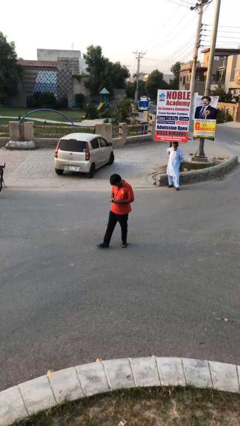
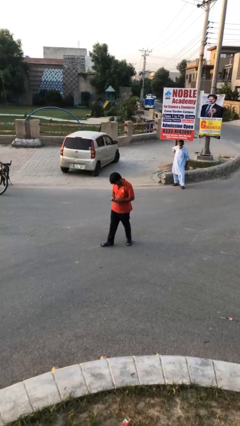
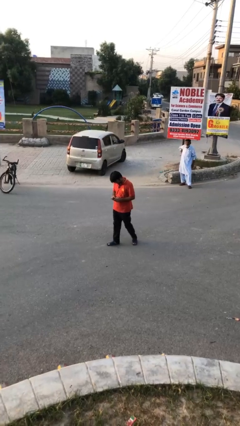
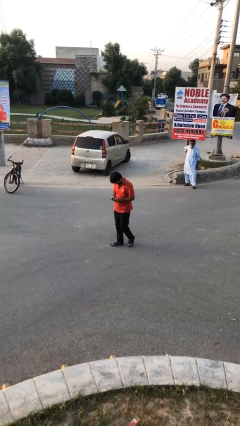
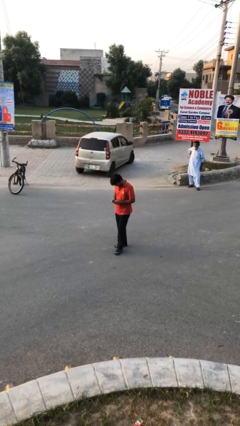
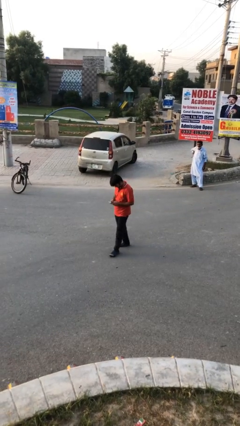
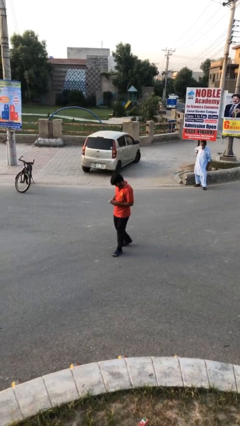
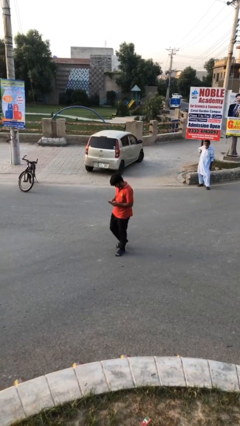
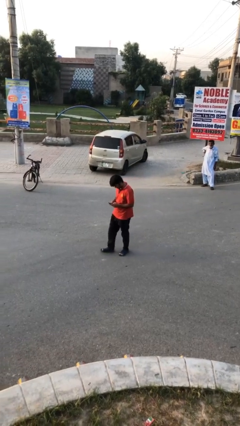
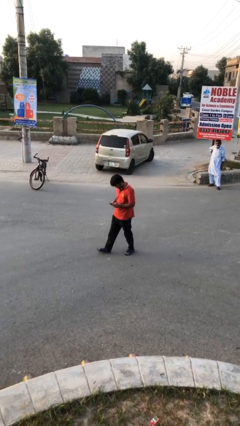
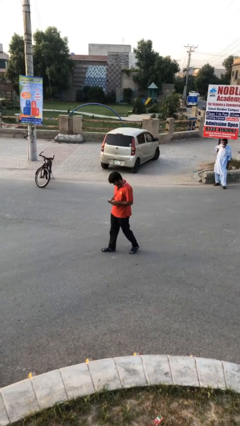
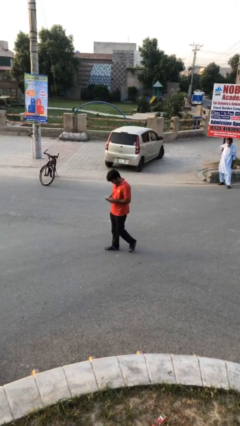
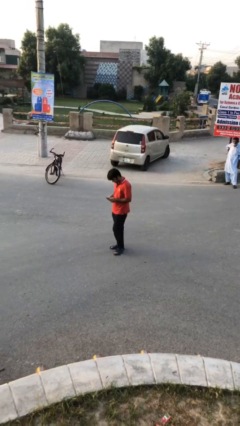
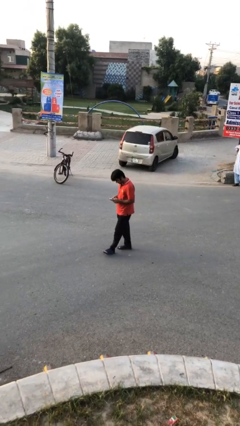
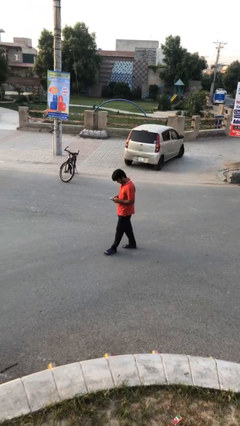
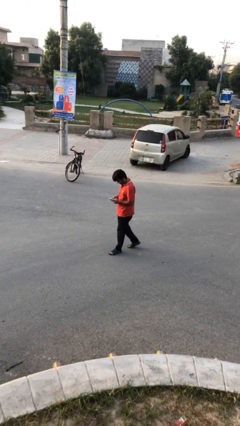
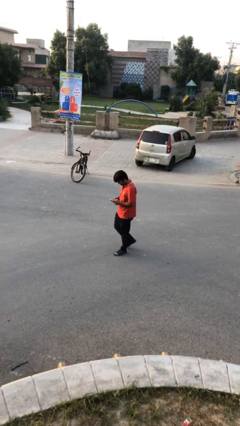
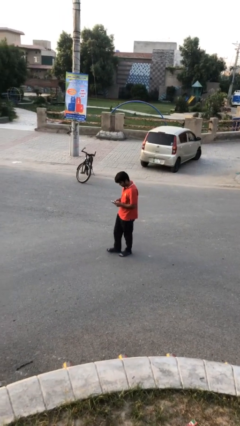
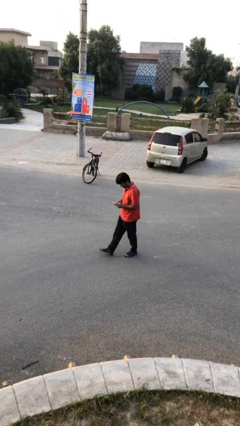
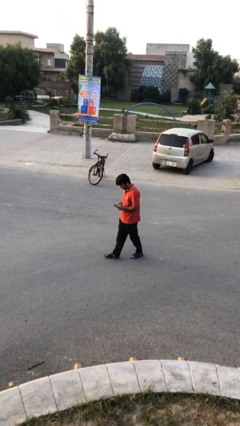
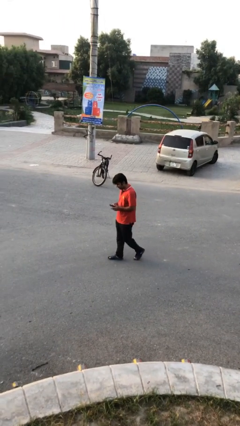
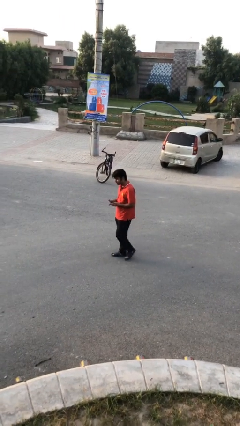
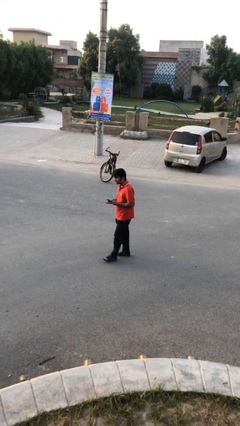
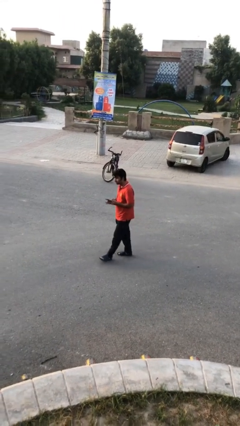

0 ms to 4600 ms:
person texts on phone

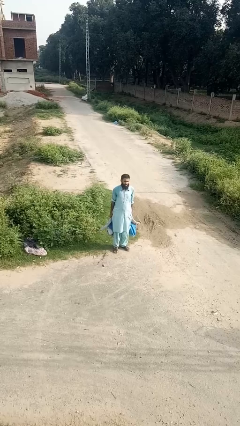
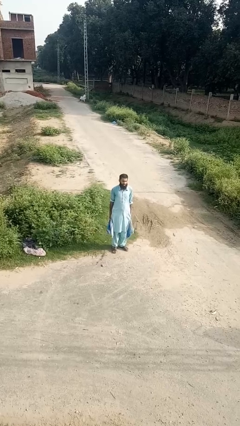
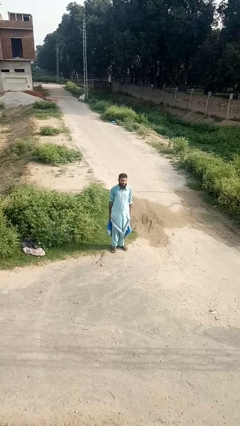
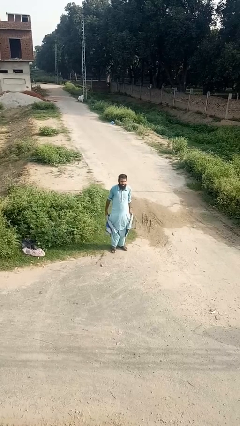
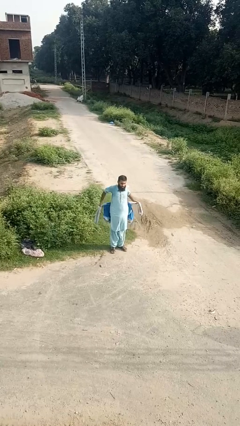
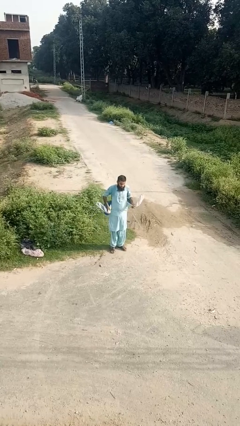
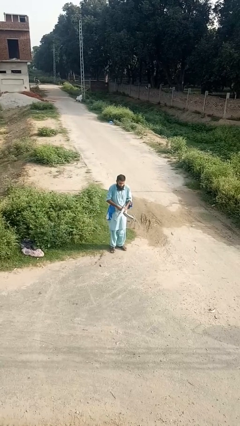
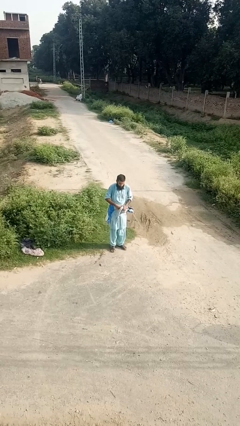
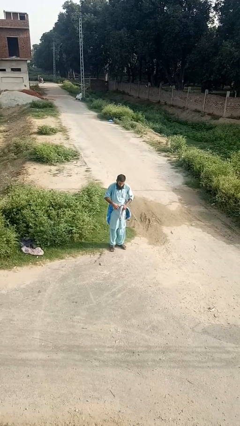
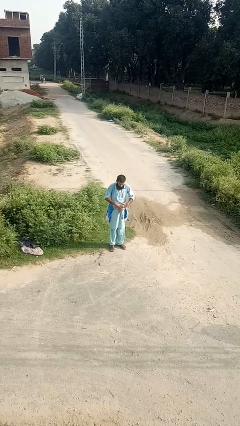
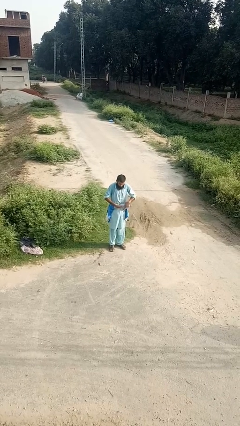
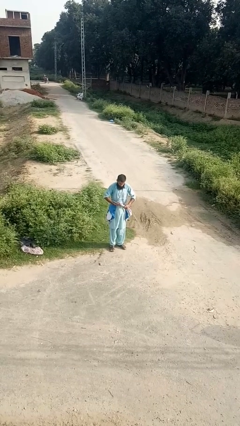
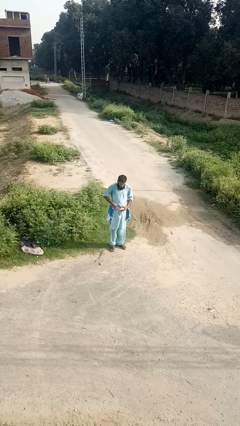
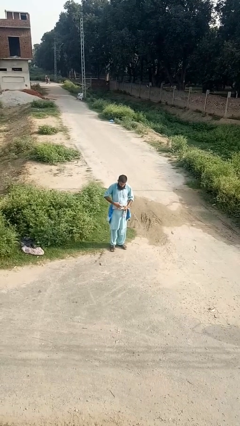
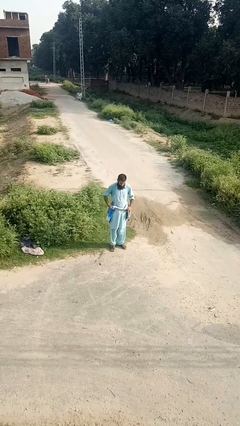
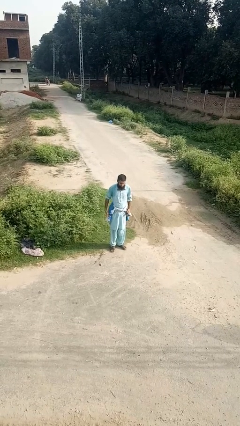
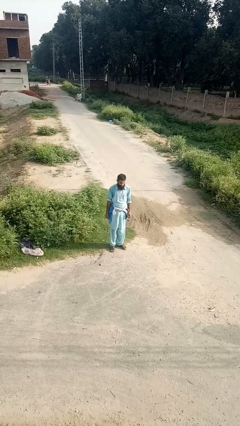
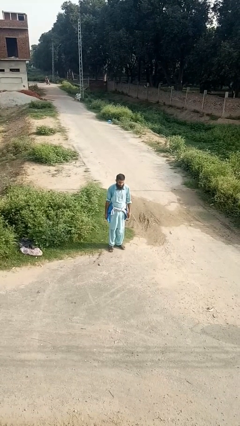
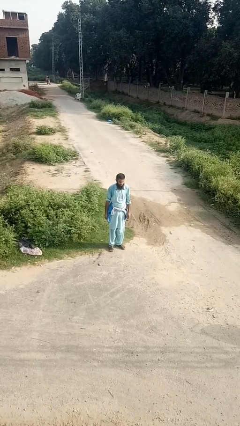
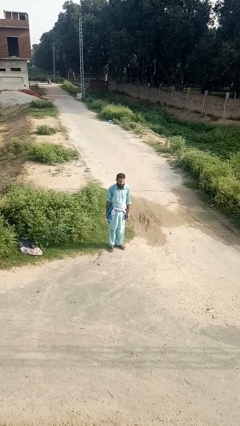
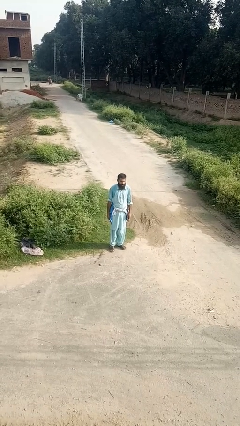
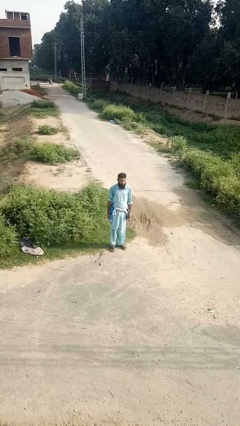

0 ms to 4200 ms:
person ties jacket around waist

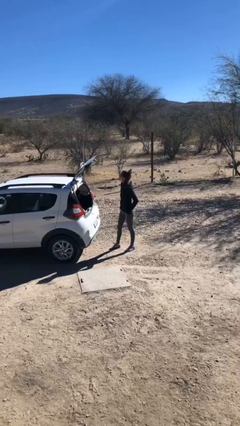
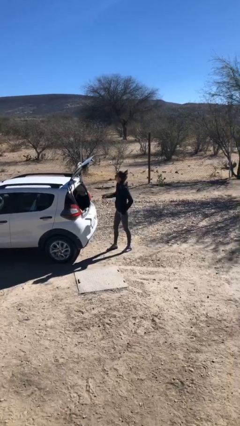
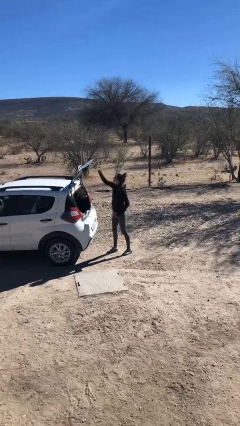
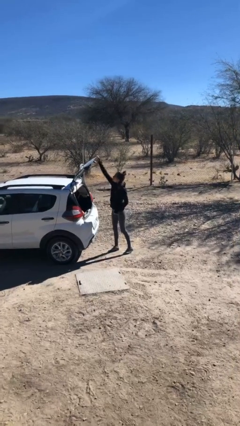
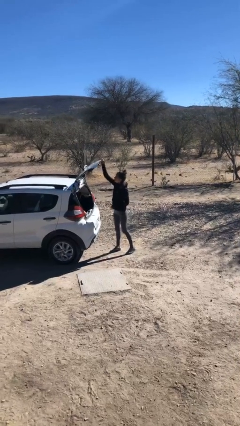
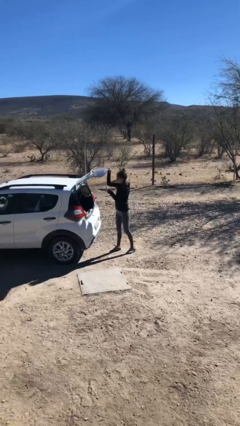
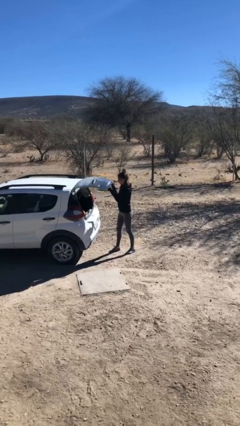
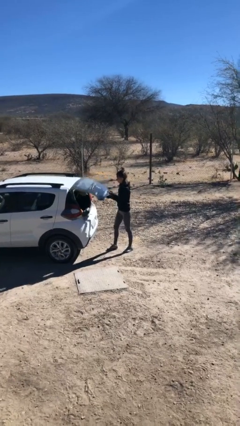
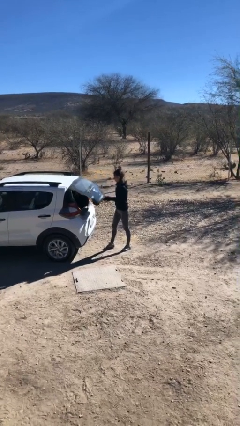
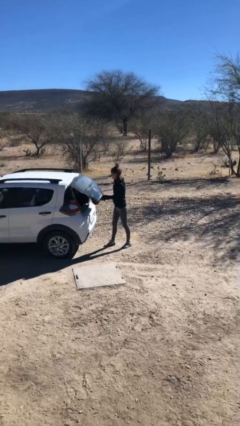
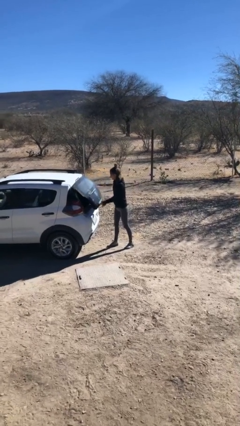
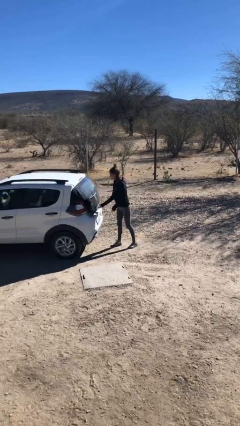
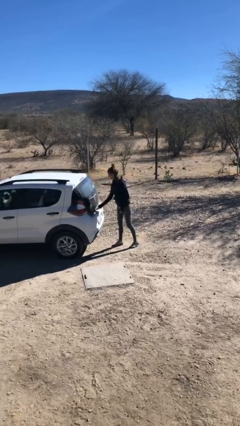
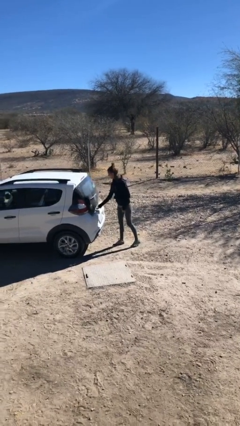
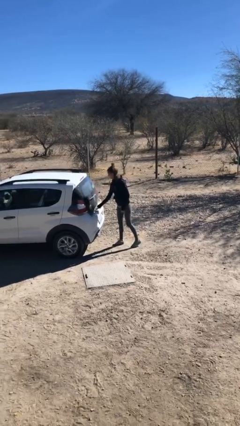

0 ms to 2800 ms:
person closes car trunk

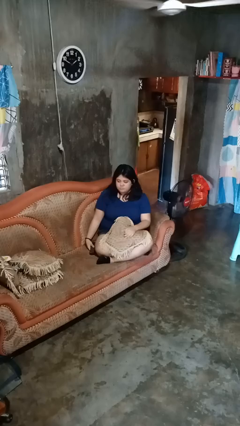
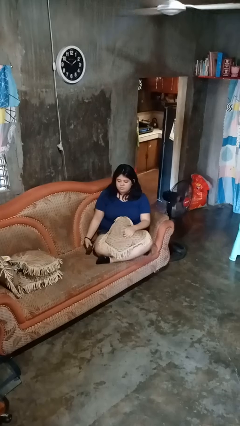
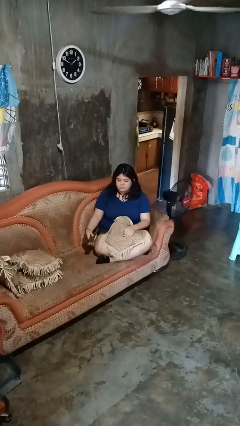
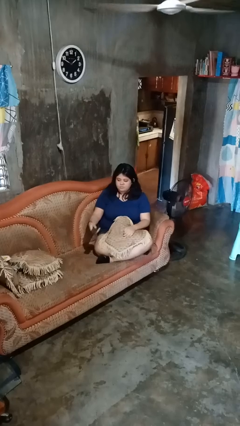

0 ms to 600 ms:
person uses television remote

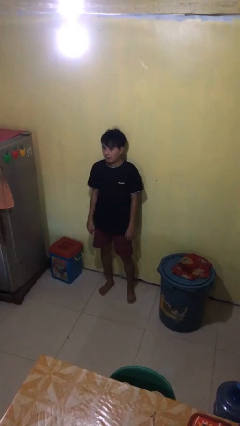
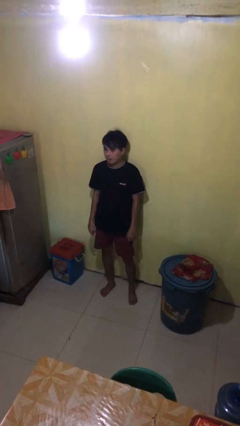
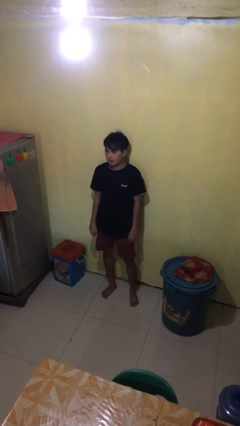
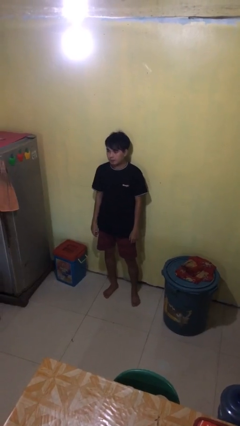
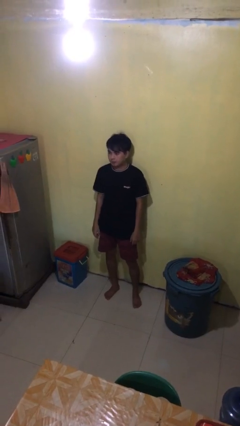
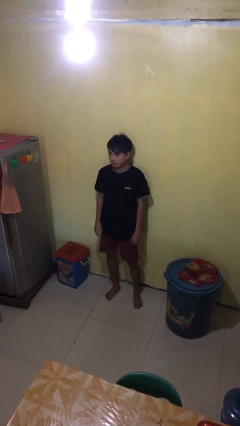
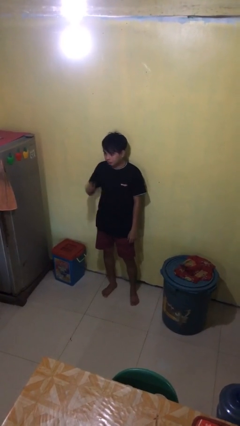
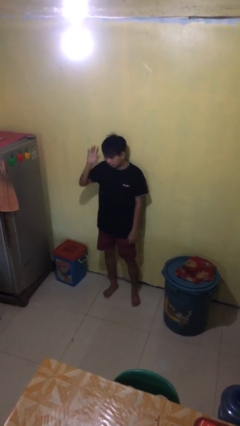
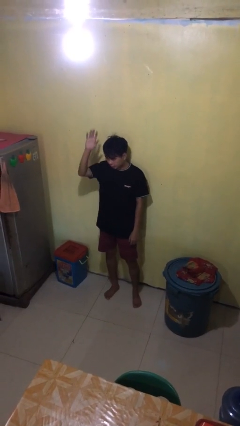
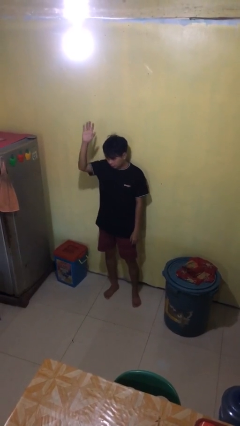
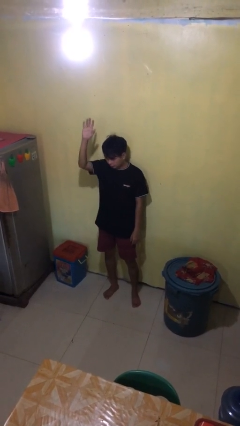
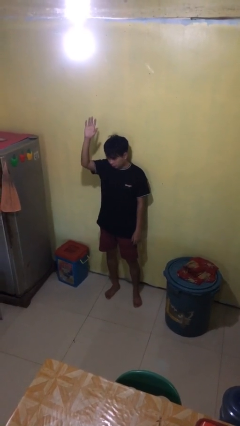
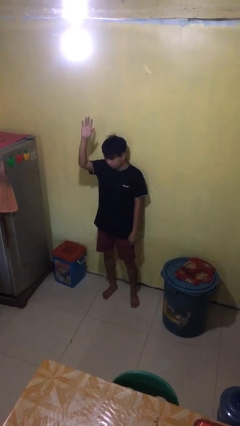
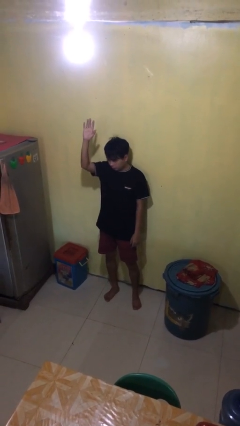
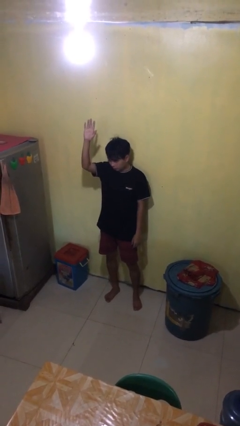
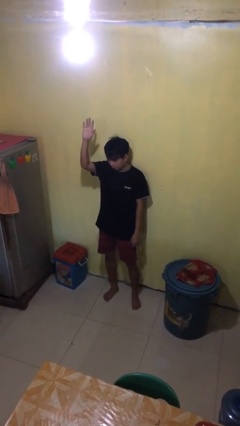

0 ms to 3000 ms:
person gestures raise hand

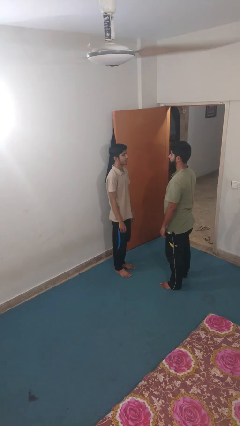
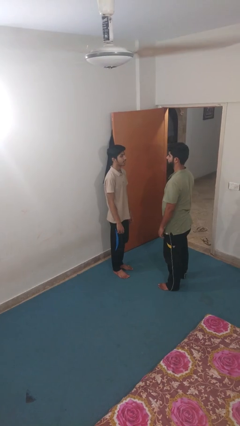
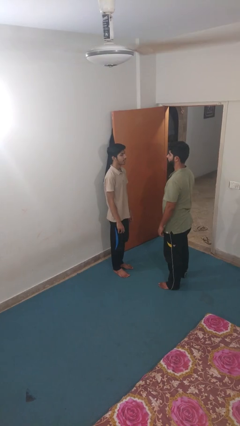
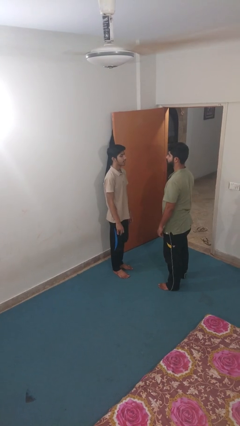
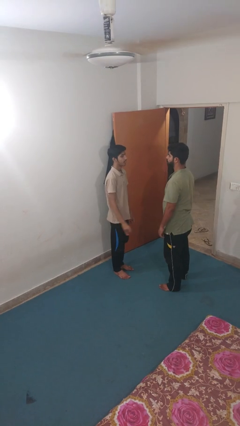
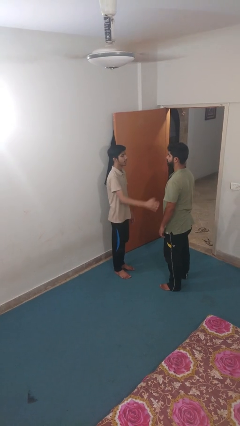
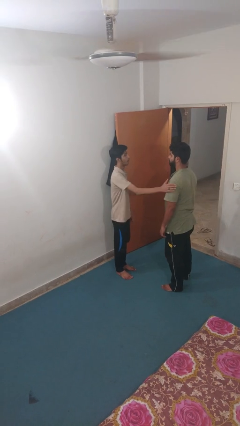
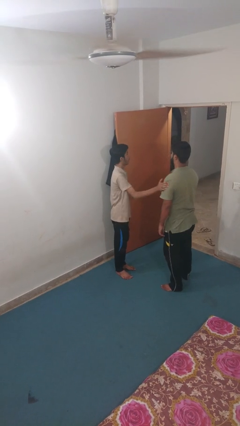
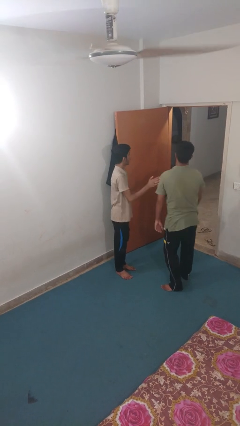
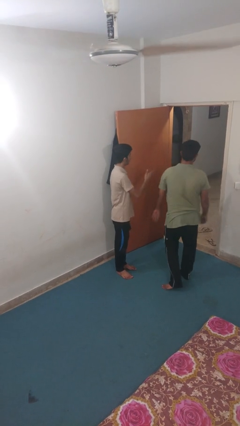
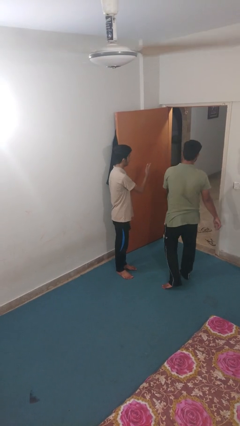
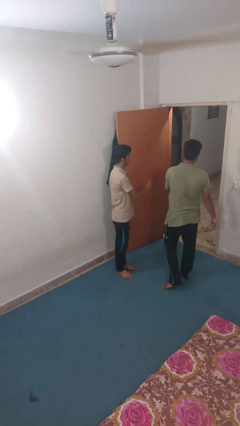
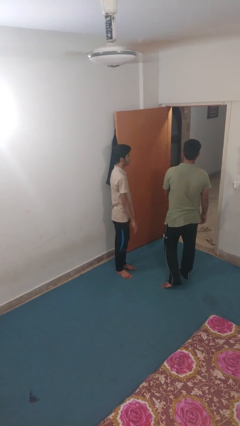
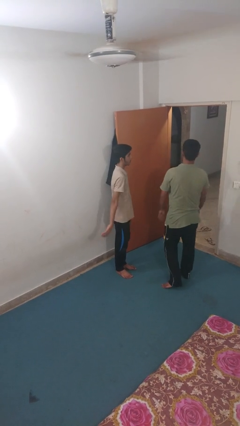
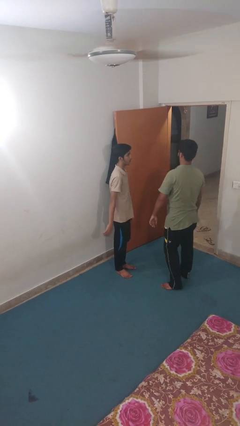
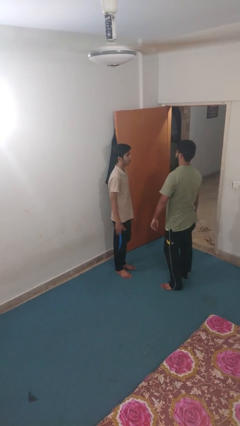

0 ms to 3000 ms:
person shoves person
